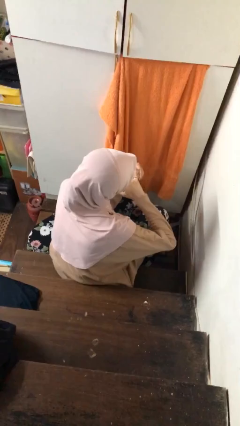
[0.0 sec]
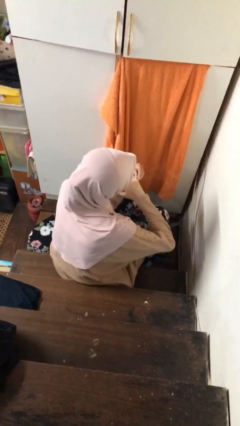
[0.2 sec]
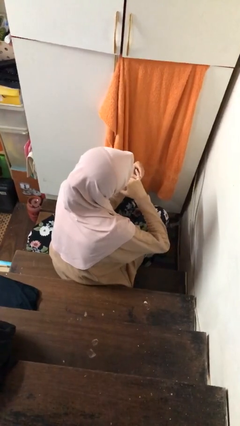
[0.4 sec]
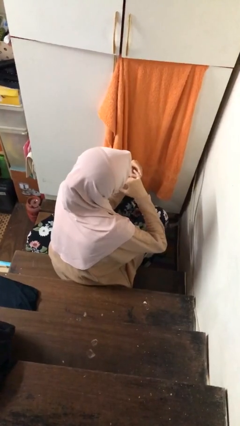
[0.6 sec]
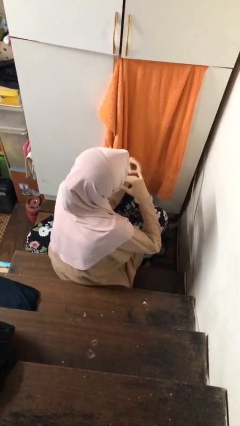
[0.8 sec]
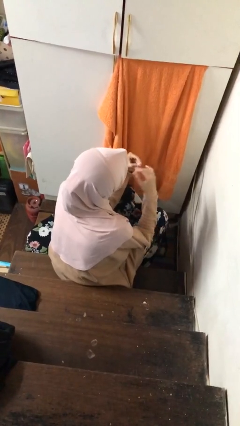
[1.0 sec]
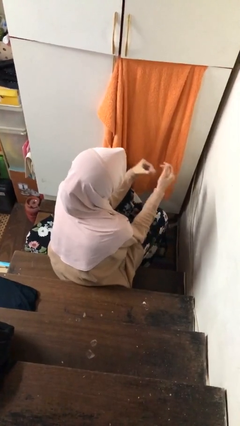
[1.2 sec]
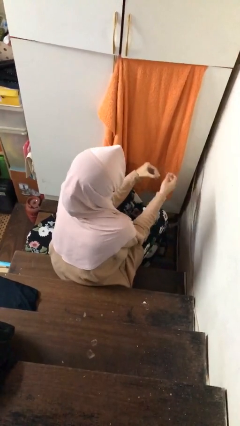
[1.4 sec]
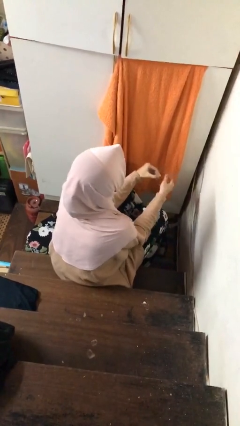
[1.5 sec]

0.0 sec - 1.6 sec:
person takes off ring

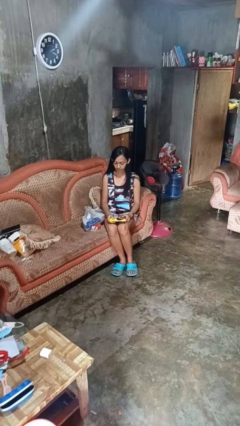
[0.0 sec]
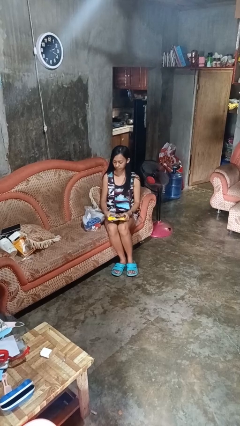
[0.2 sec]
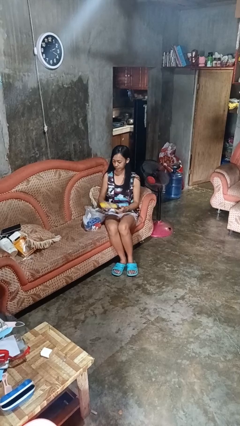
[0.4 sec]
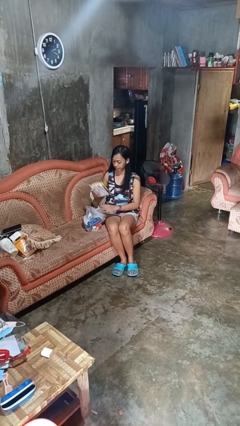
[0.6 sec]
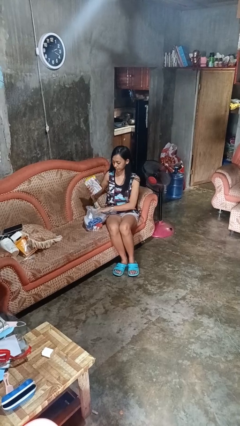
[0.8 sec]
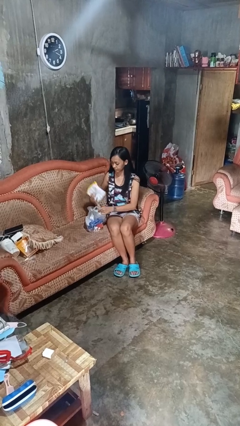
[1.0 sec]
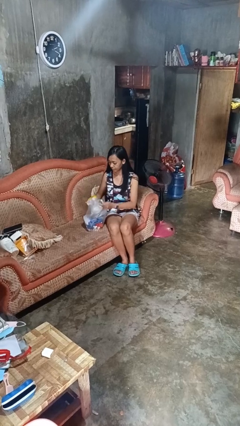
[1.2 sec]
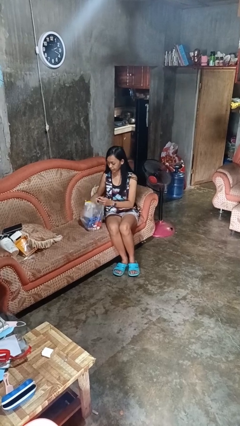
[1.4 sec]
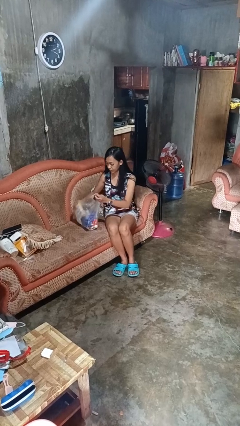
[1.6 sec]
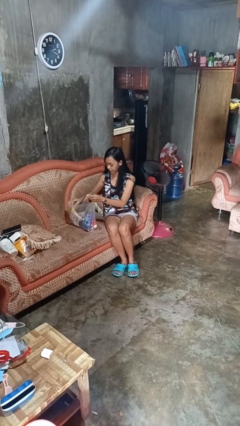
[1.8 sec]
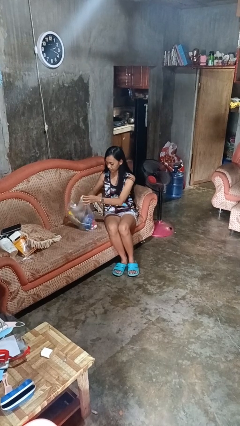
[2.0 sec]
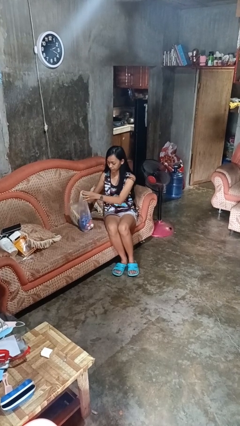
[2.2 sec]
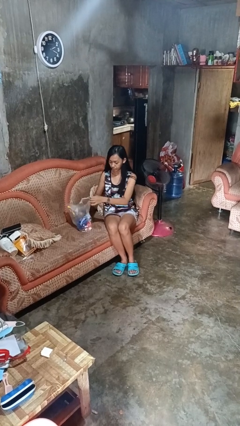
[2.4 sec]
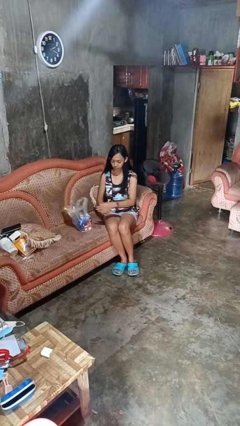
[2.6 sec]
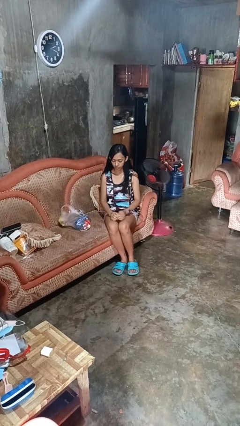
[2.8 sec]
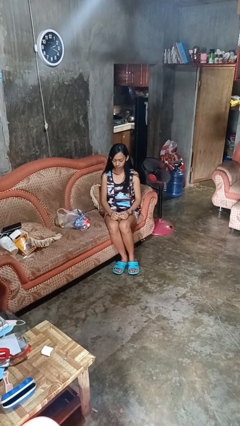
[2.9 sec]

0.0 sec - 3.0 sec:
person puts object into bag

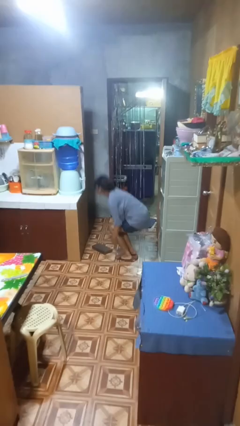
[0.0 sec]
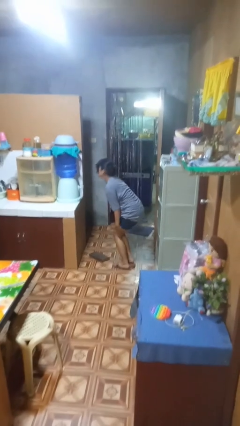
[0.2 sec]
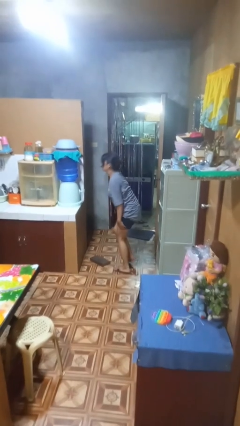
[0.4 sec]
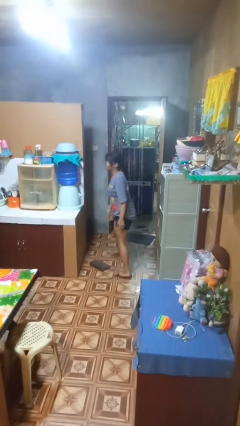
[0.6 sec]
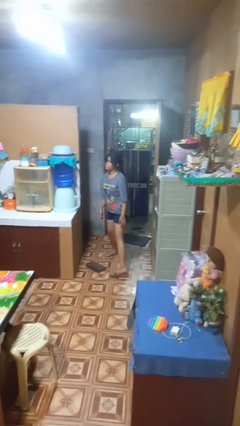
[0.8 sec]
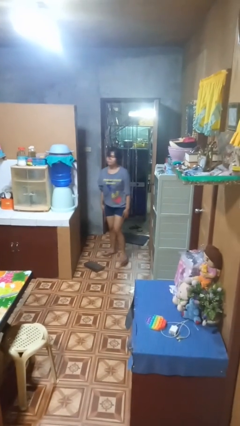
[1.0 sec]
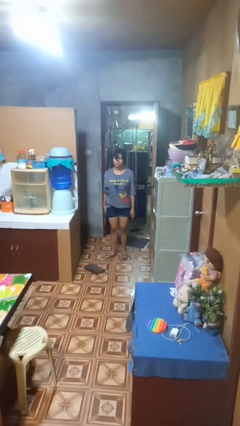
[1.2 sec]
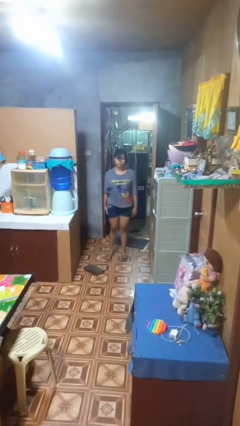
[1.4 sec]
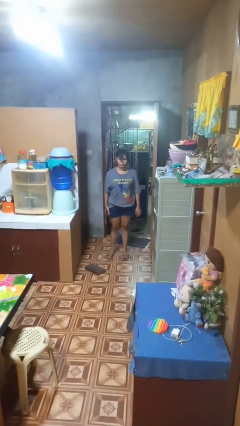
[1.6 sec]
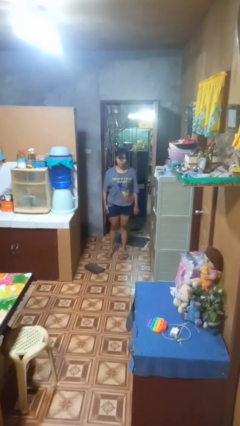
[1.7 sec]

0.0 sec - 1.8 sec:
person stands up from floor

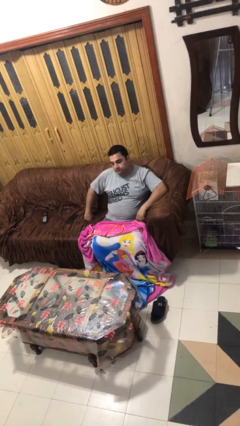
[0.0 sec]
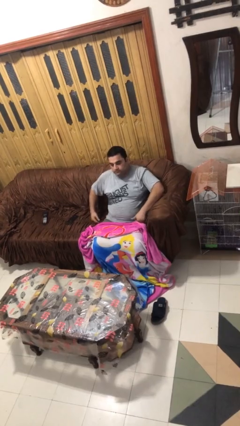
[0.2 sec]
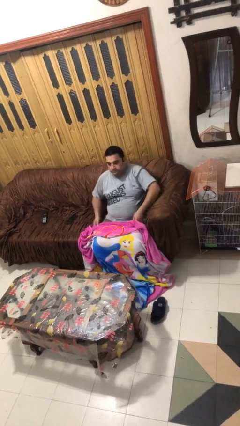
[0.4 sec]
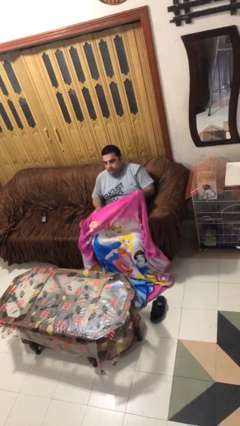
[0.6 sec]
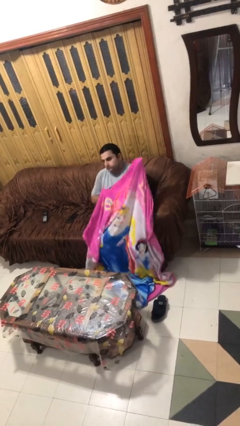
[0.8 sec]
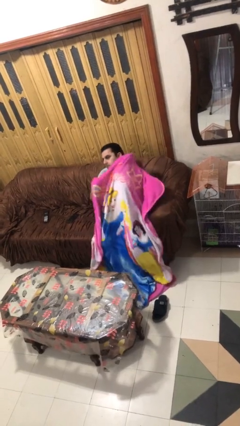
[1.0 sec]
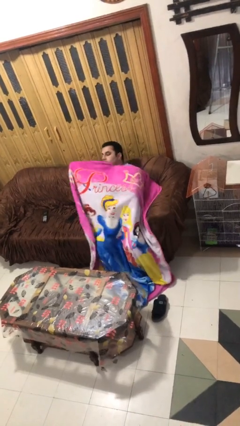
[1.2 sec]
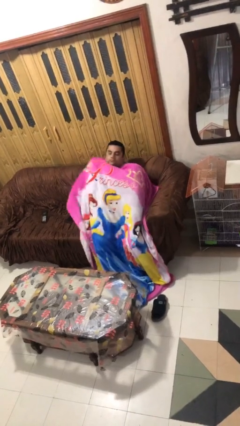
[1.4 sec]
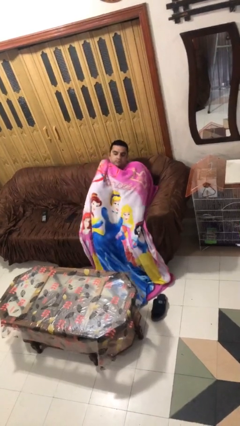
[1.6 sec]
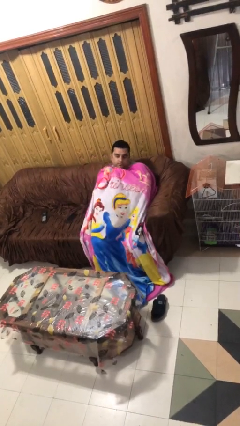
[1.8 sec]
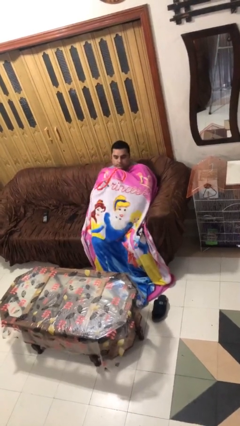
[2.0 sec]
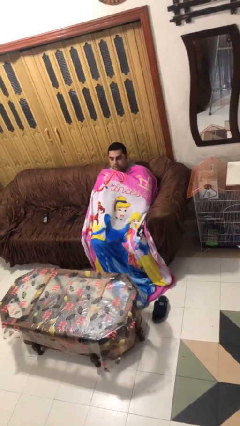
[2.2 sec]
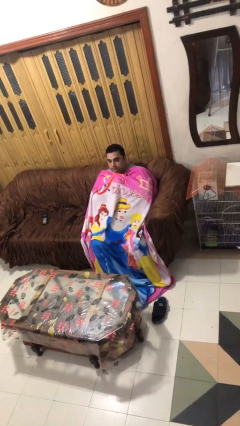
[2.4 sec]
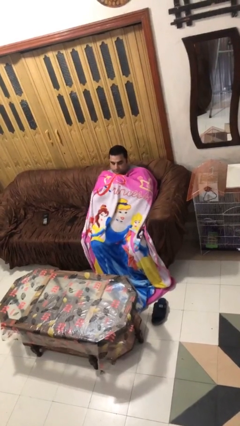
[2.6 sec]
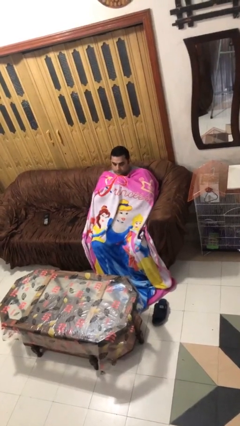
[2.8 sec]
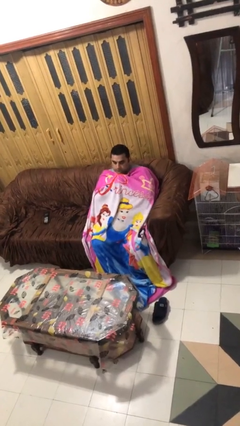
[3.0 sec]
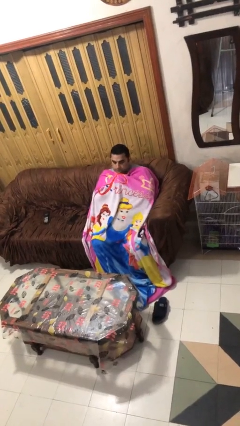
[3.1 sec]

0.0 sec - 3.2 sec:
person covers with blanket

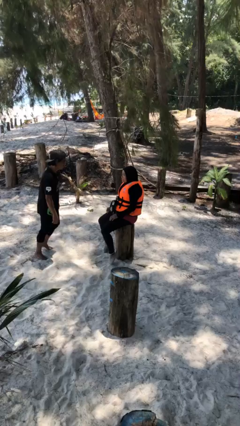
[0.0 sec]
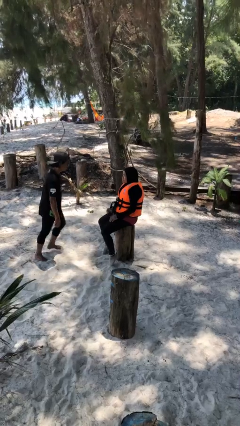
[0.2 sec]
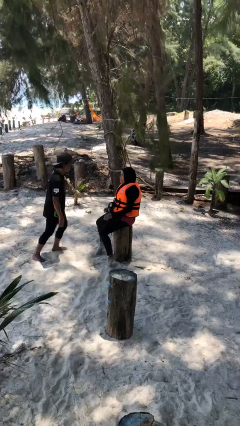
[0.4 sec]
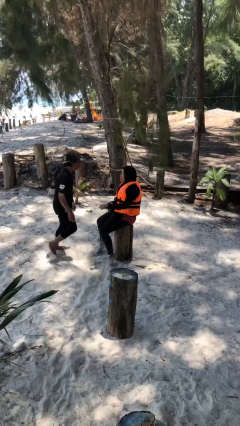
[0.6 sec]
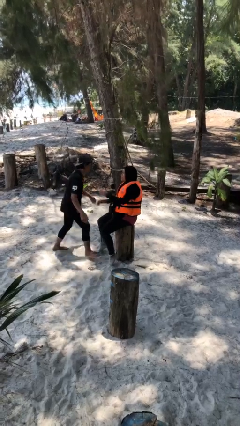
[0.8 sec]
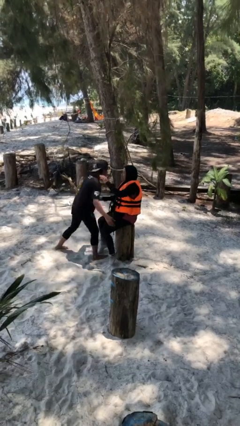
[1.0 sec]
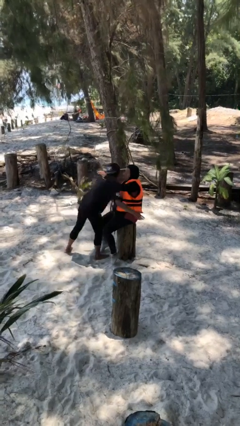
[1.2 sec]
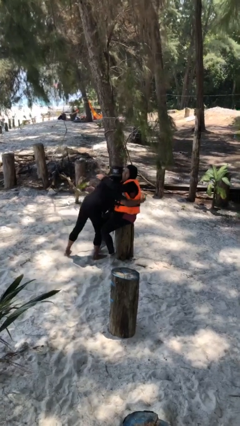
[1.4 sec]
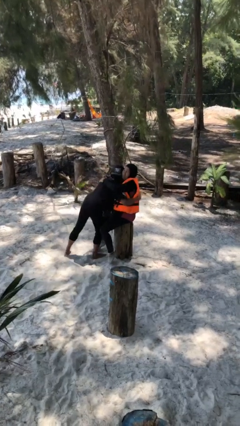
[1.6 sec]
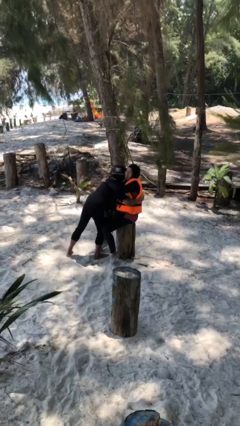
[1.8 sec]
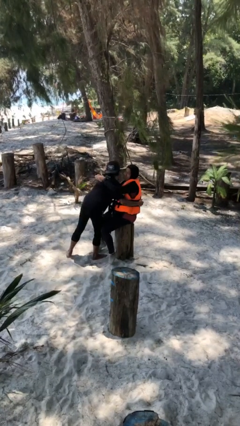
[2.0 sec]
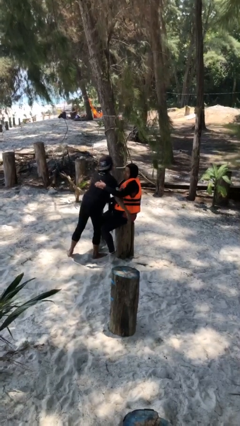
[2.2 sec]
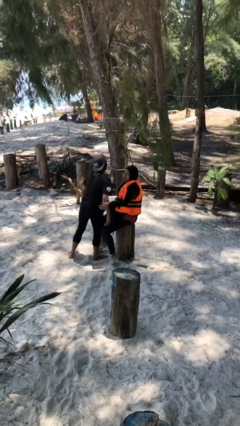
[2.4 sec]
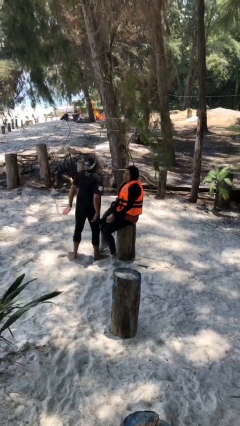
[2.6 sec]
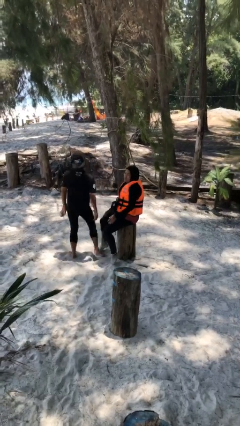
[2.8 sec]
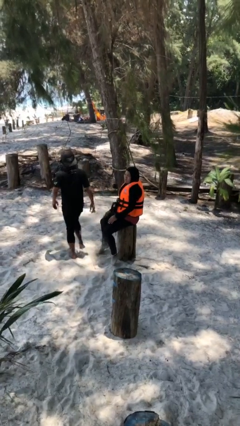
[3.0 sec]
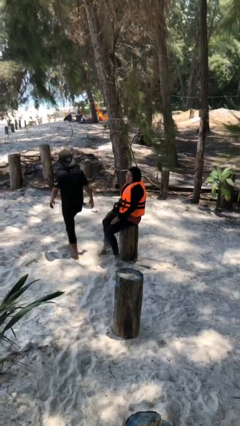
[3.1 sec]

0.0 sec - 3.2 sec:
person embraces person

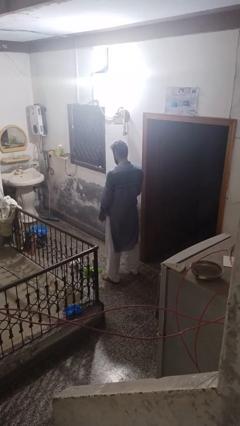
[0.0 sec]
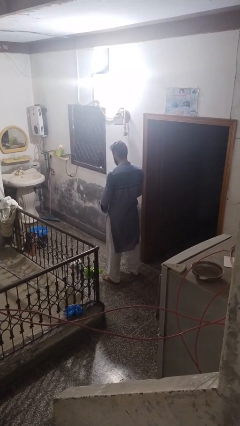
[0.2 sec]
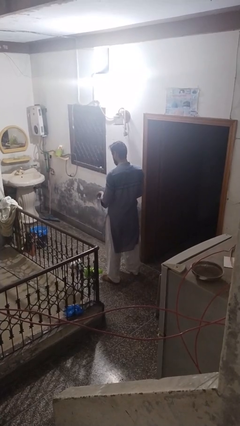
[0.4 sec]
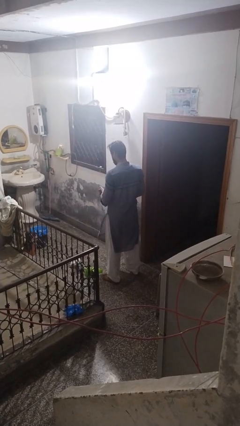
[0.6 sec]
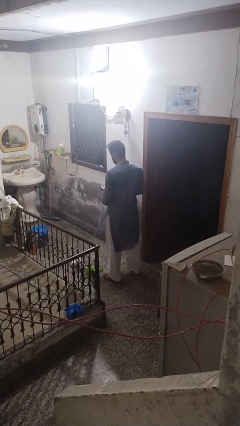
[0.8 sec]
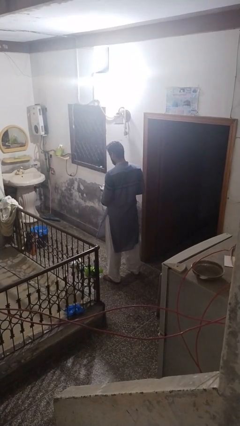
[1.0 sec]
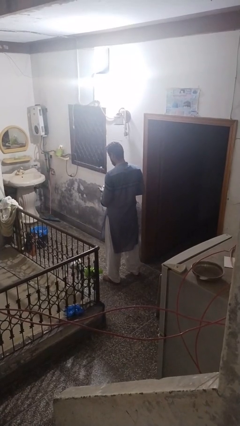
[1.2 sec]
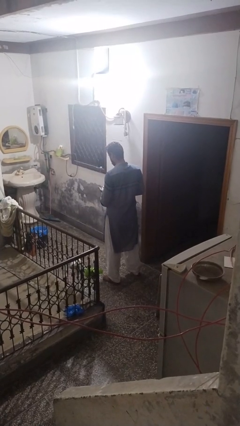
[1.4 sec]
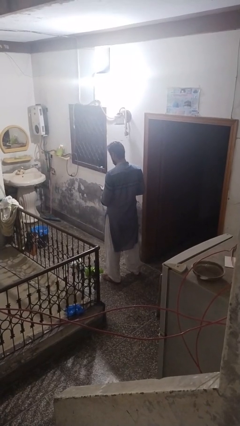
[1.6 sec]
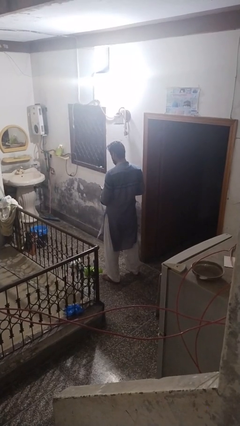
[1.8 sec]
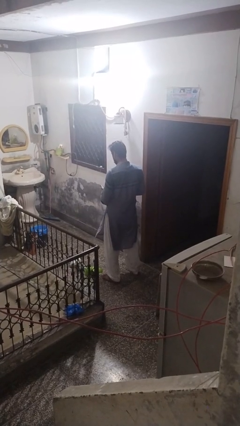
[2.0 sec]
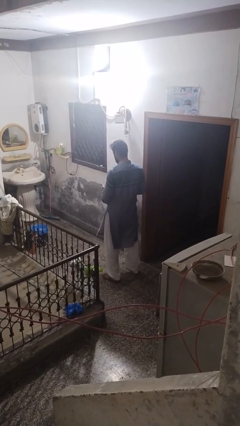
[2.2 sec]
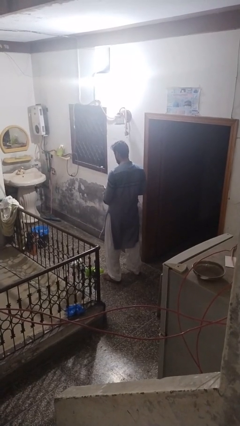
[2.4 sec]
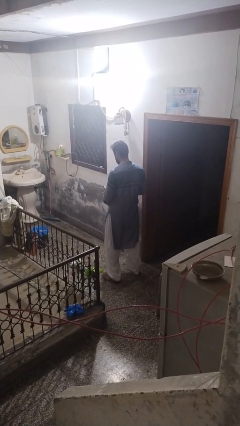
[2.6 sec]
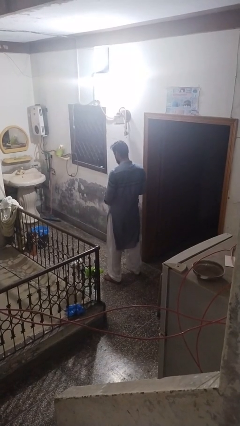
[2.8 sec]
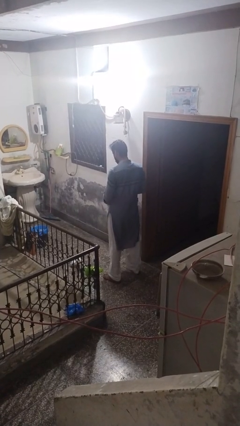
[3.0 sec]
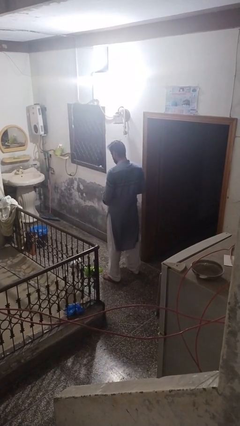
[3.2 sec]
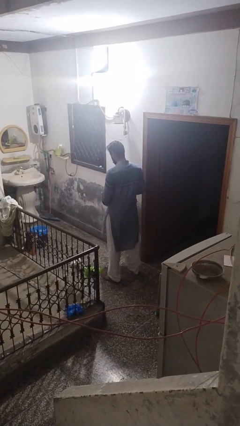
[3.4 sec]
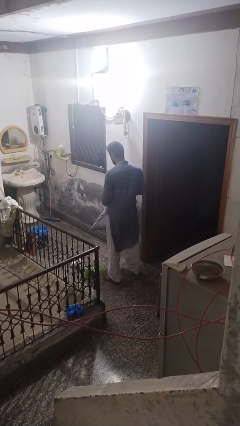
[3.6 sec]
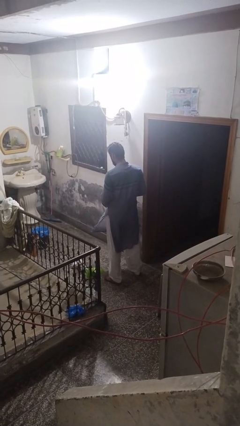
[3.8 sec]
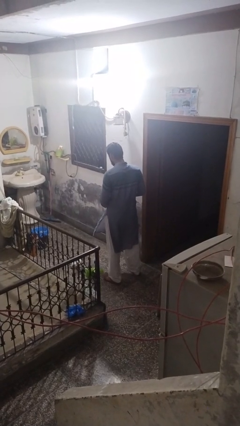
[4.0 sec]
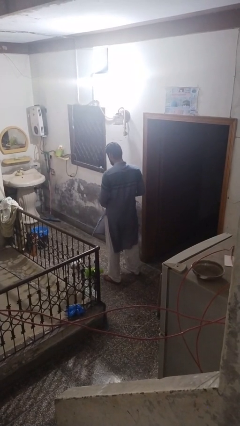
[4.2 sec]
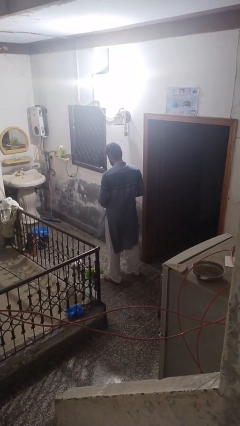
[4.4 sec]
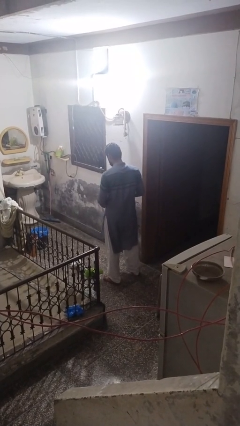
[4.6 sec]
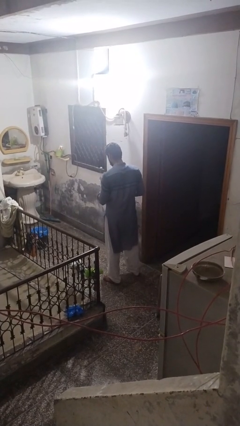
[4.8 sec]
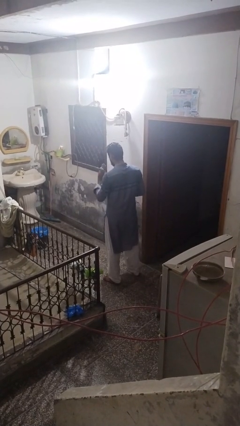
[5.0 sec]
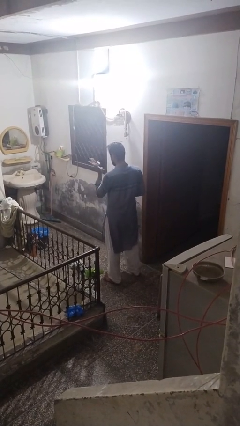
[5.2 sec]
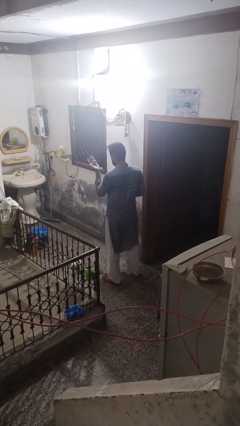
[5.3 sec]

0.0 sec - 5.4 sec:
person washes hands
